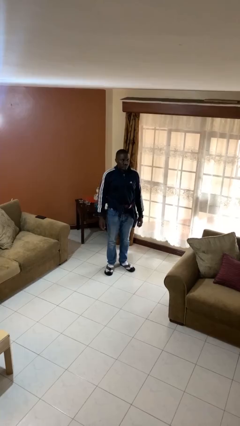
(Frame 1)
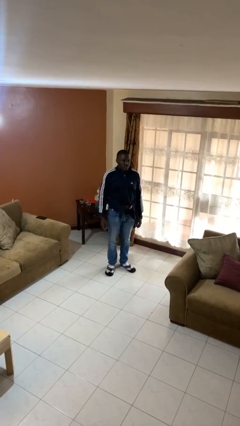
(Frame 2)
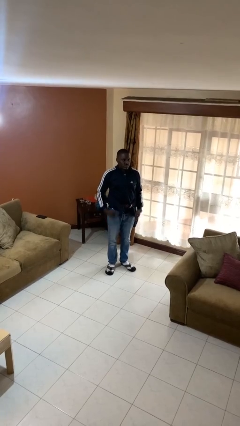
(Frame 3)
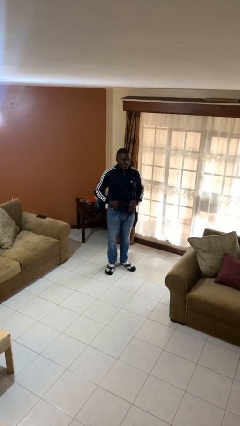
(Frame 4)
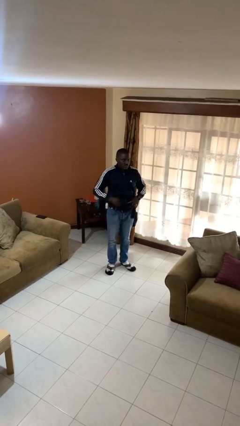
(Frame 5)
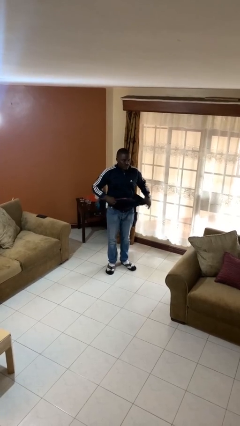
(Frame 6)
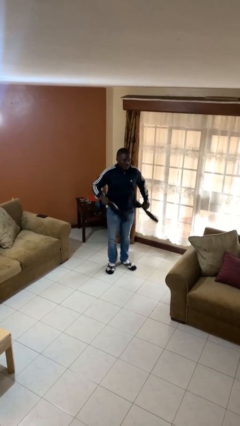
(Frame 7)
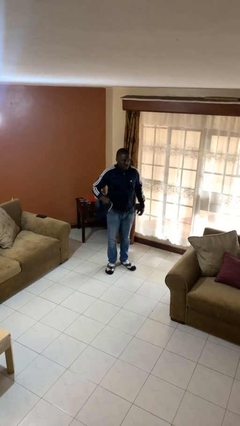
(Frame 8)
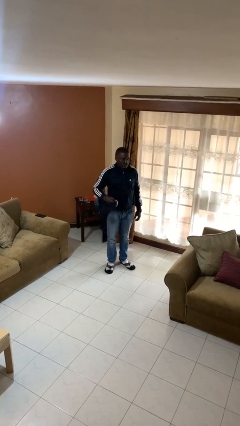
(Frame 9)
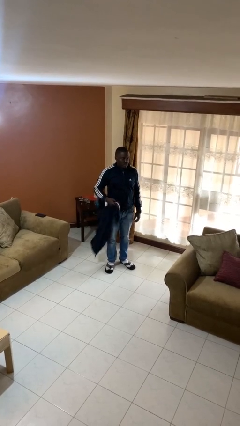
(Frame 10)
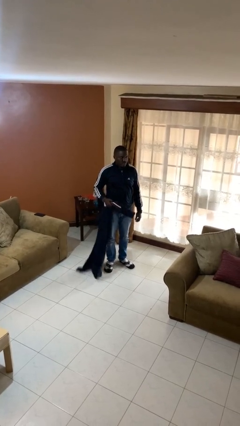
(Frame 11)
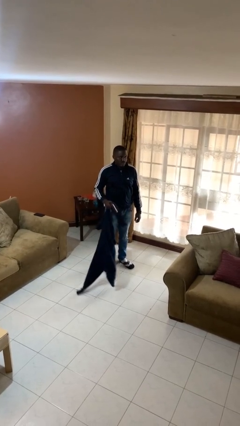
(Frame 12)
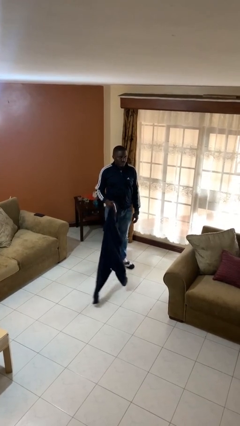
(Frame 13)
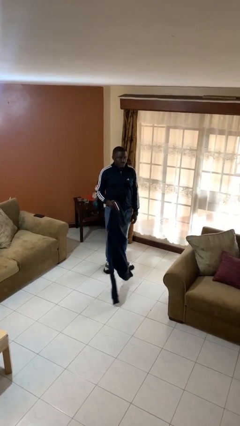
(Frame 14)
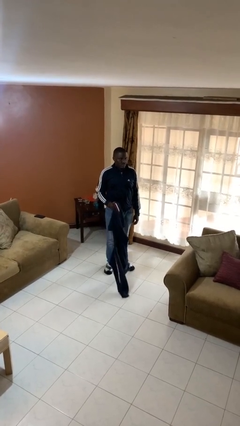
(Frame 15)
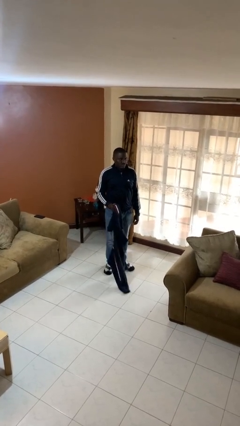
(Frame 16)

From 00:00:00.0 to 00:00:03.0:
person unties jacket around waist

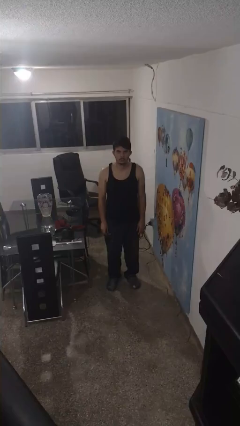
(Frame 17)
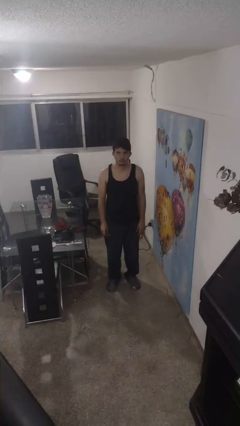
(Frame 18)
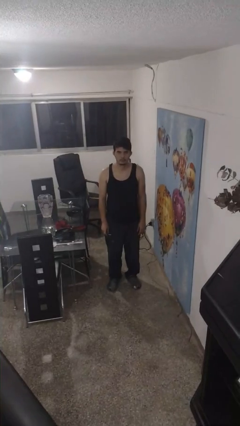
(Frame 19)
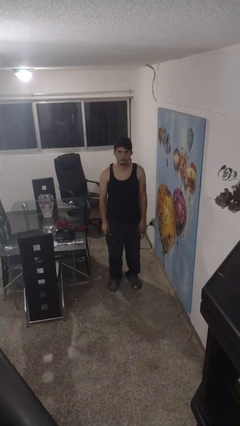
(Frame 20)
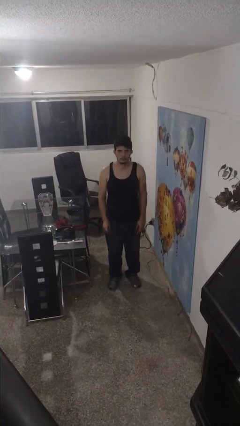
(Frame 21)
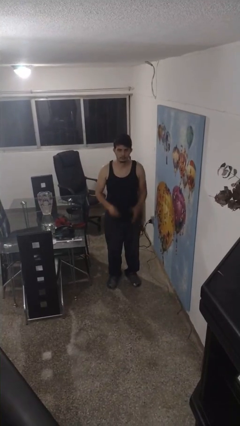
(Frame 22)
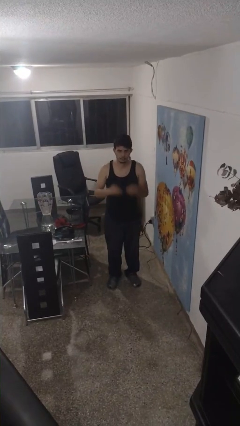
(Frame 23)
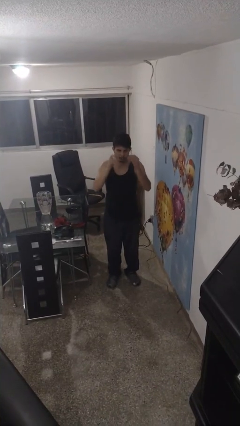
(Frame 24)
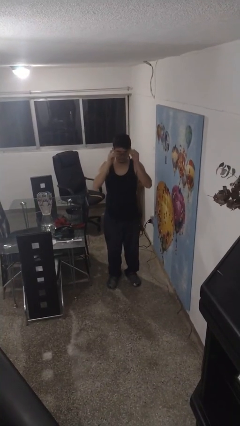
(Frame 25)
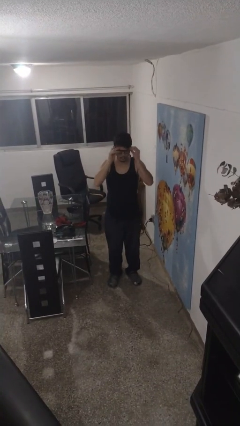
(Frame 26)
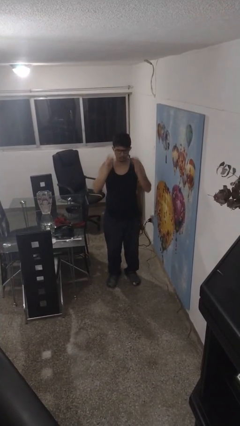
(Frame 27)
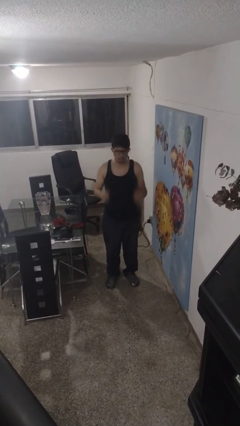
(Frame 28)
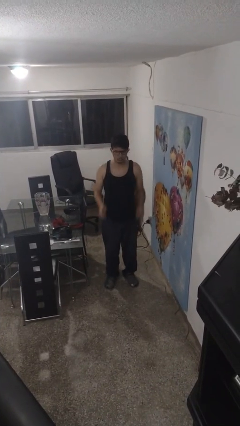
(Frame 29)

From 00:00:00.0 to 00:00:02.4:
person puts on glasses

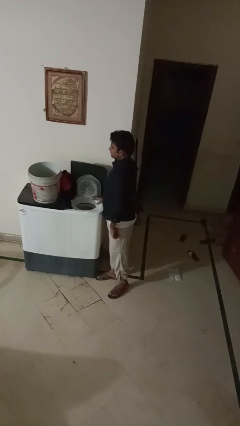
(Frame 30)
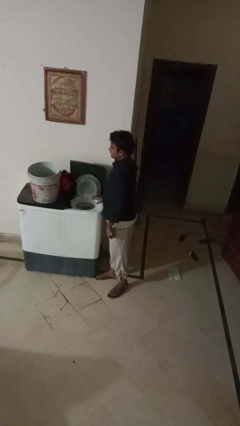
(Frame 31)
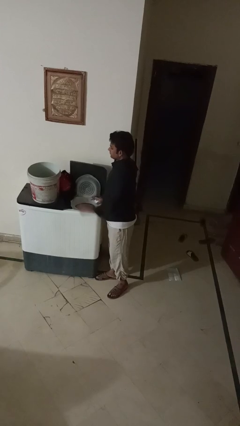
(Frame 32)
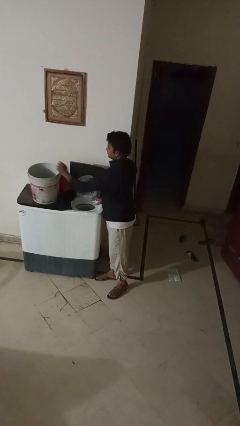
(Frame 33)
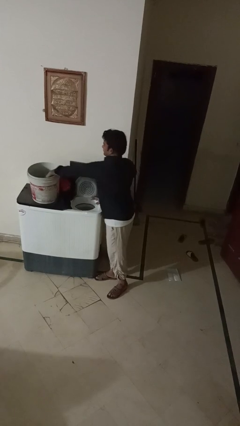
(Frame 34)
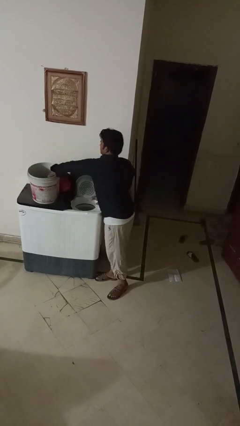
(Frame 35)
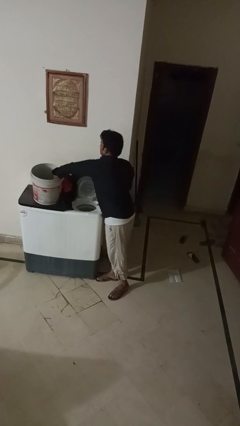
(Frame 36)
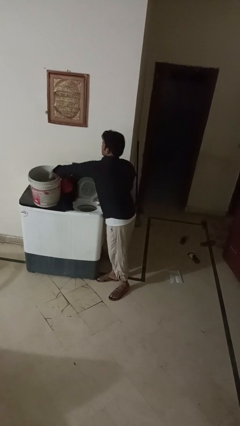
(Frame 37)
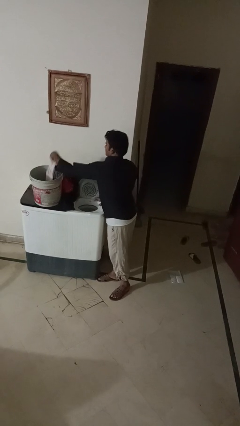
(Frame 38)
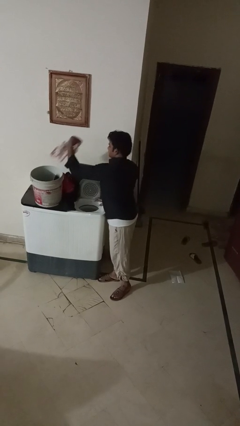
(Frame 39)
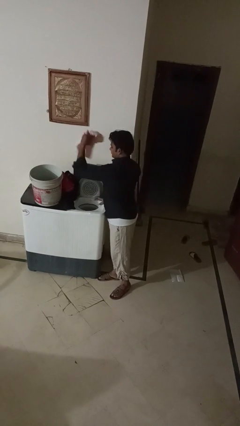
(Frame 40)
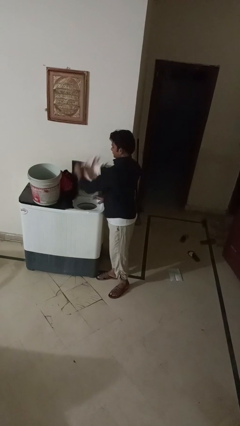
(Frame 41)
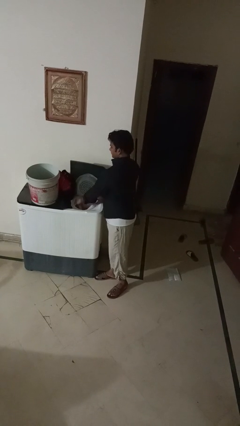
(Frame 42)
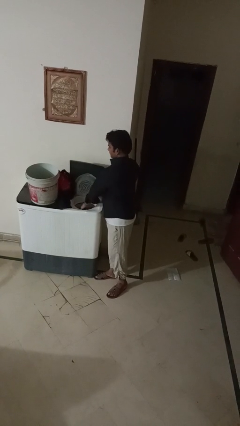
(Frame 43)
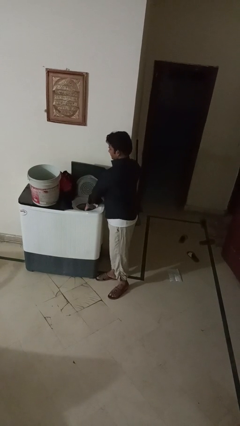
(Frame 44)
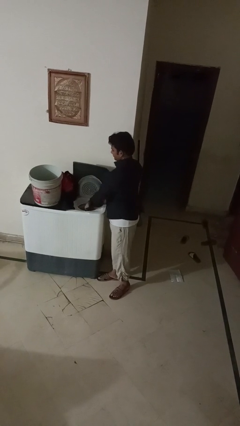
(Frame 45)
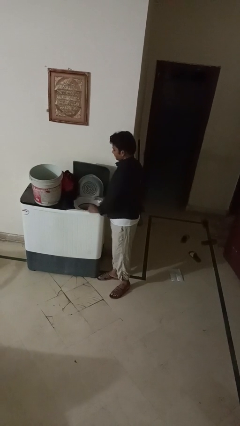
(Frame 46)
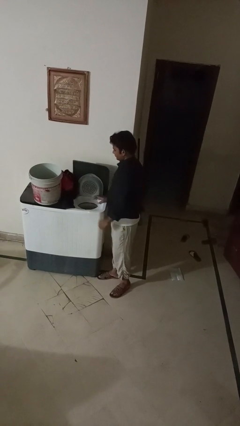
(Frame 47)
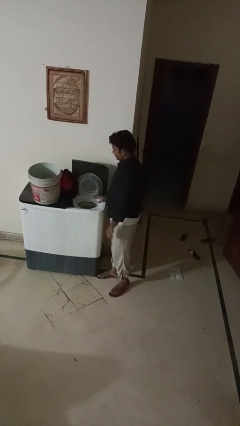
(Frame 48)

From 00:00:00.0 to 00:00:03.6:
person loads dryer

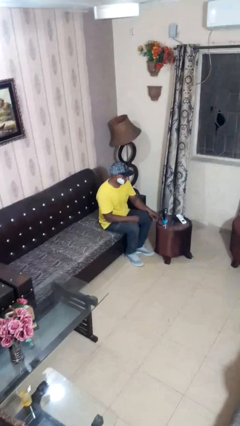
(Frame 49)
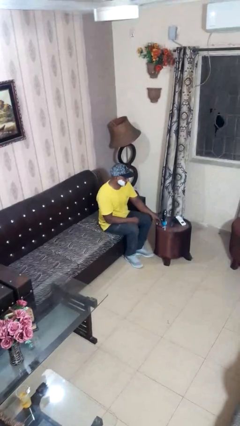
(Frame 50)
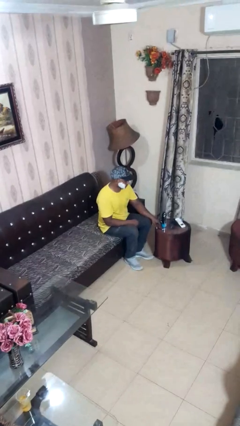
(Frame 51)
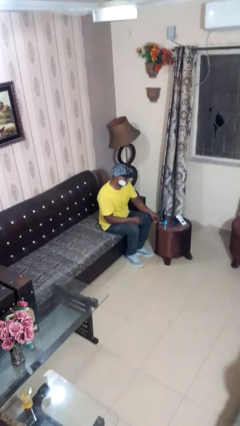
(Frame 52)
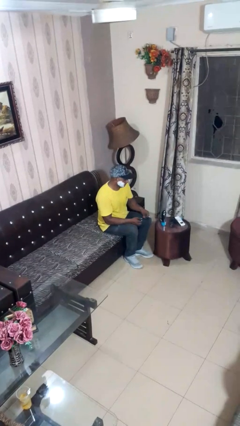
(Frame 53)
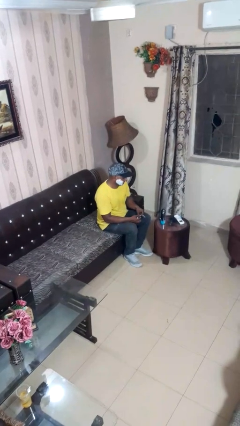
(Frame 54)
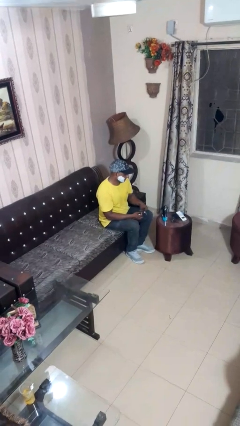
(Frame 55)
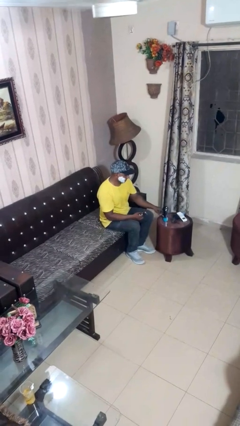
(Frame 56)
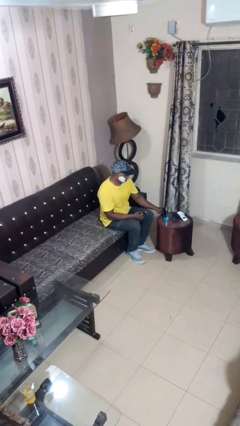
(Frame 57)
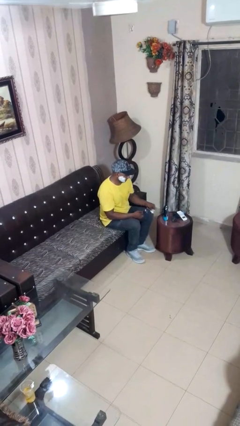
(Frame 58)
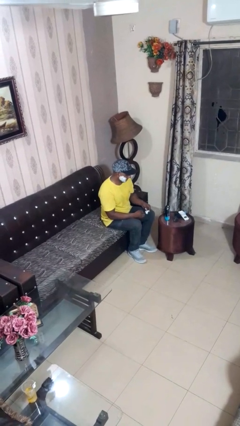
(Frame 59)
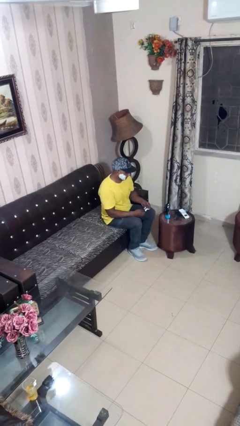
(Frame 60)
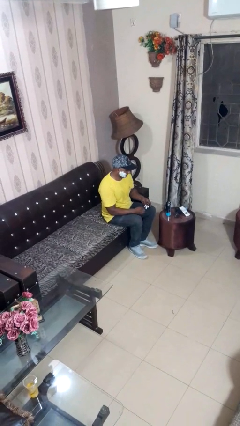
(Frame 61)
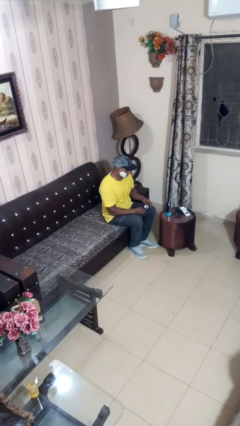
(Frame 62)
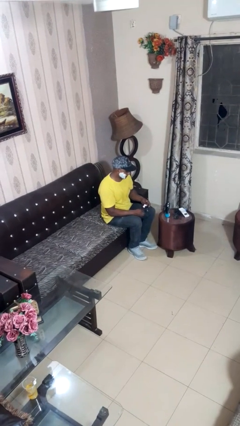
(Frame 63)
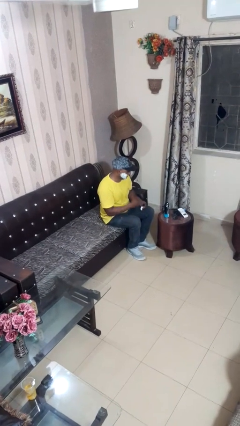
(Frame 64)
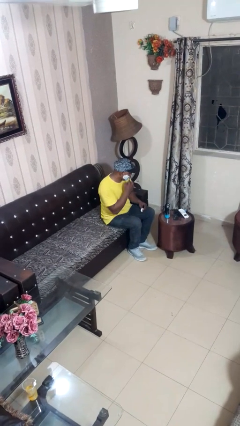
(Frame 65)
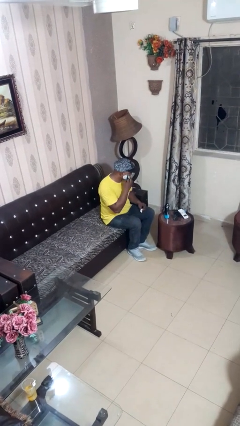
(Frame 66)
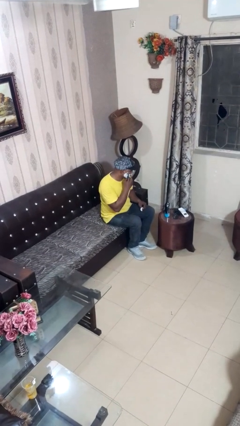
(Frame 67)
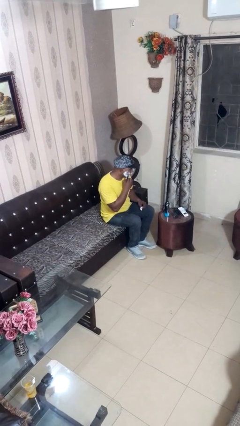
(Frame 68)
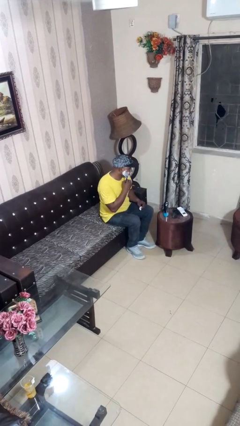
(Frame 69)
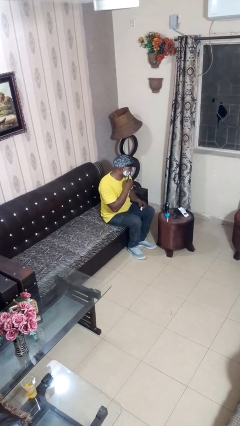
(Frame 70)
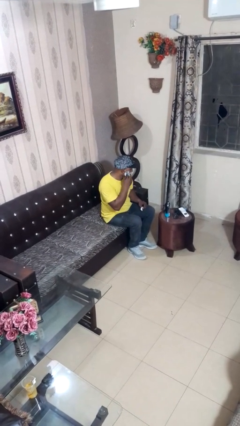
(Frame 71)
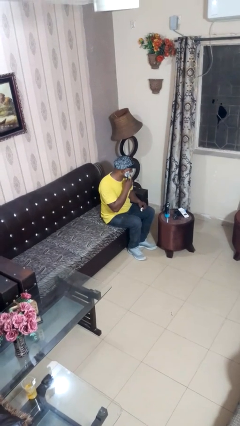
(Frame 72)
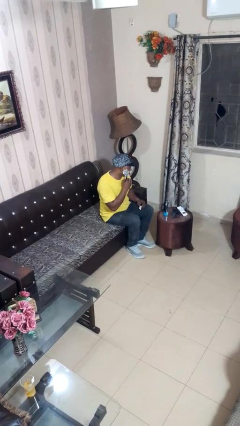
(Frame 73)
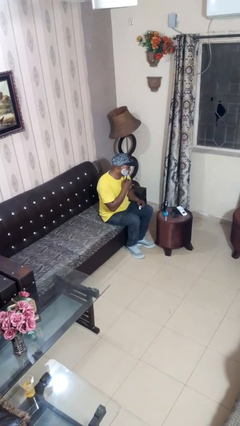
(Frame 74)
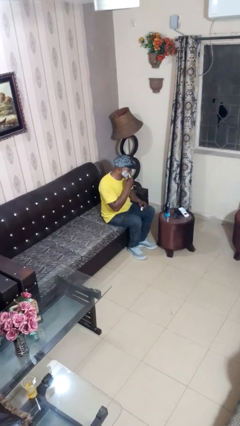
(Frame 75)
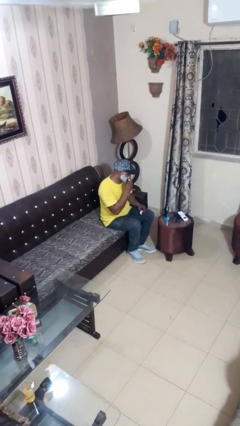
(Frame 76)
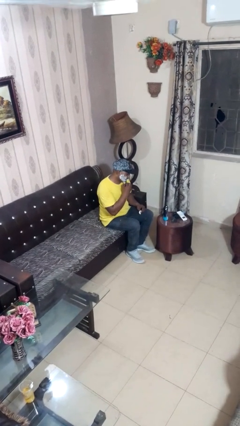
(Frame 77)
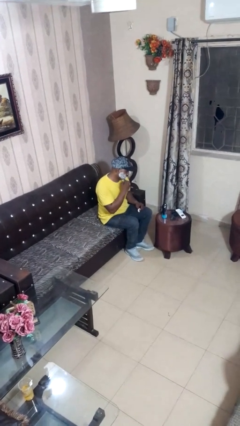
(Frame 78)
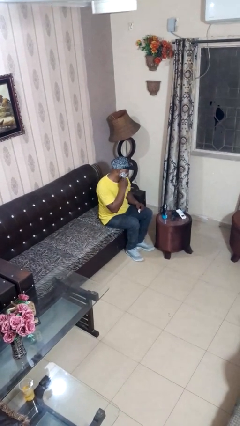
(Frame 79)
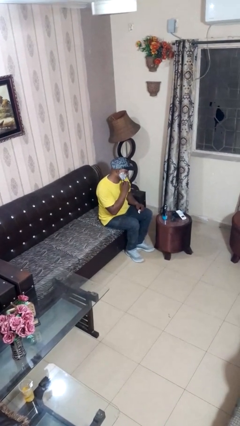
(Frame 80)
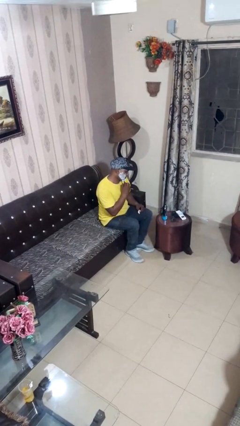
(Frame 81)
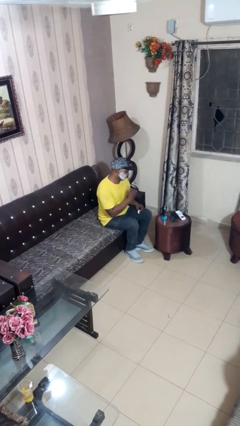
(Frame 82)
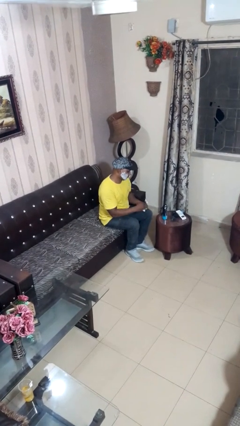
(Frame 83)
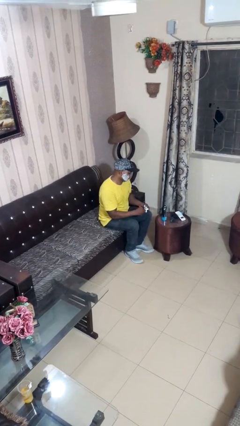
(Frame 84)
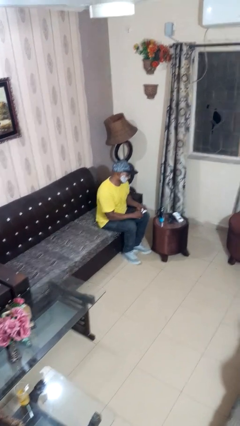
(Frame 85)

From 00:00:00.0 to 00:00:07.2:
person shaves face

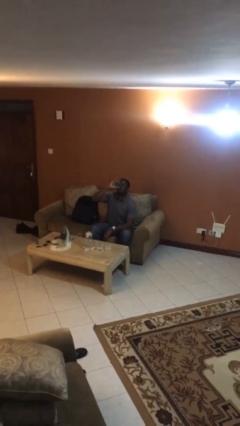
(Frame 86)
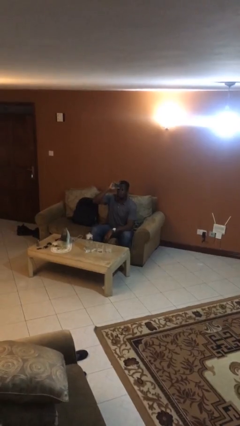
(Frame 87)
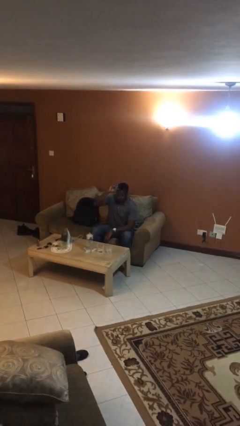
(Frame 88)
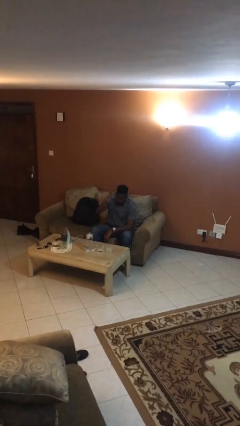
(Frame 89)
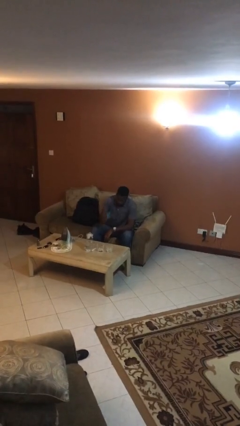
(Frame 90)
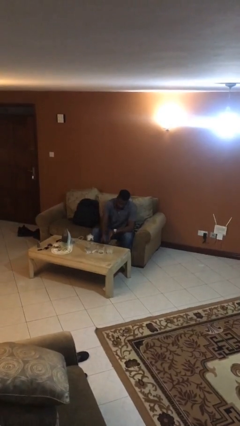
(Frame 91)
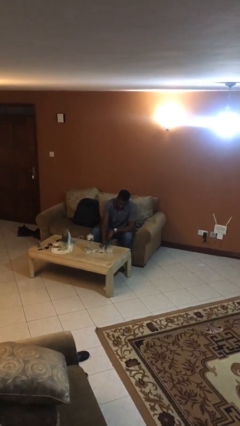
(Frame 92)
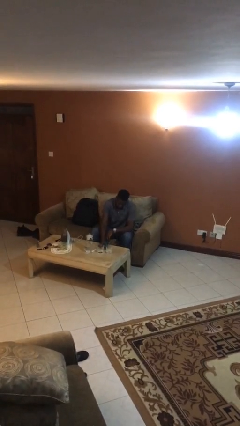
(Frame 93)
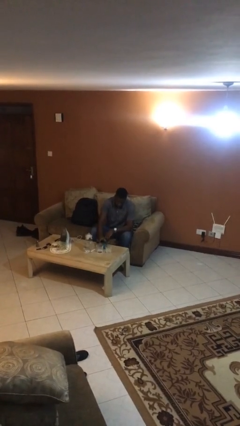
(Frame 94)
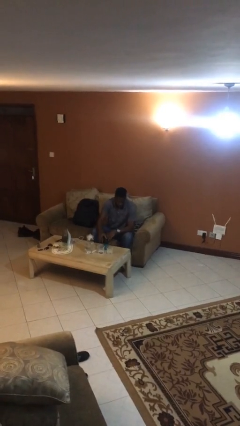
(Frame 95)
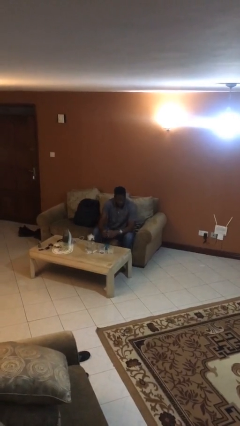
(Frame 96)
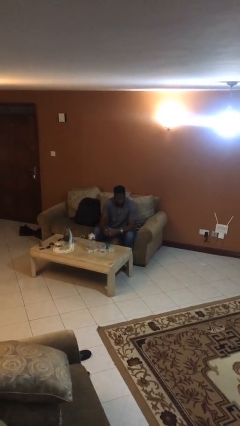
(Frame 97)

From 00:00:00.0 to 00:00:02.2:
person puts down object on table
